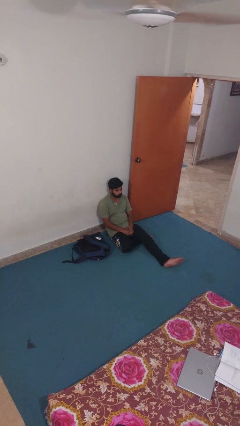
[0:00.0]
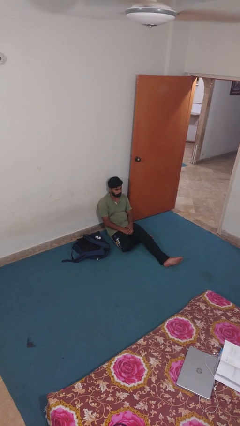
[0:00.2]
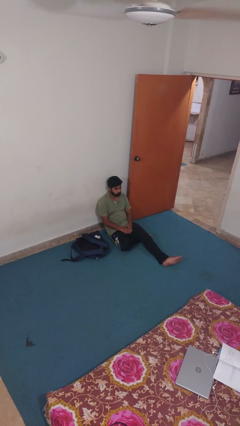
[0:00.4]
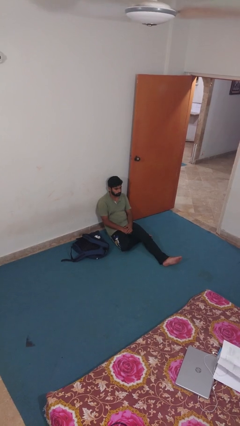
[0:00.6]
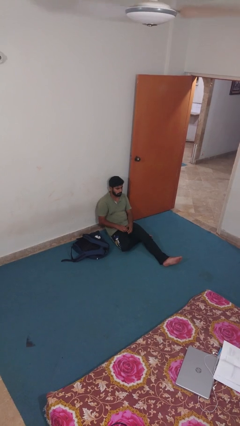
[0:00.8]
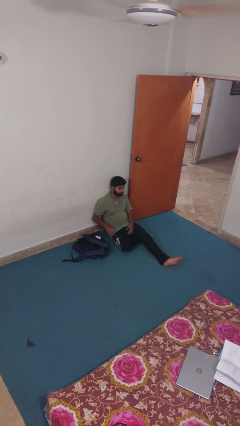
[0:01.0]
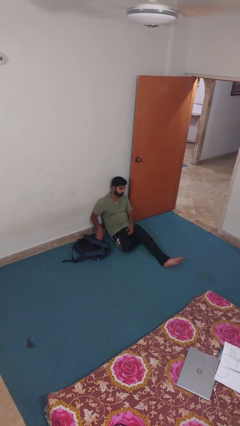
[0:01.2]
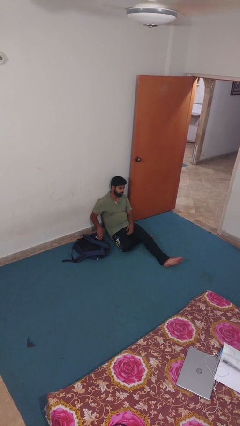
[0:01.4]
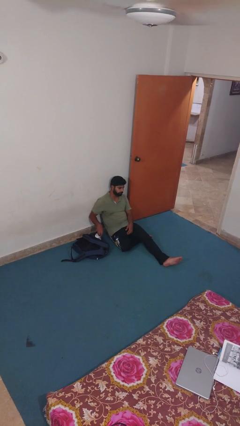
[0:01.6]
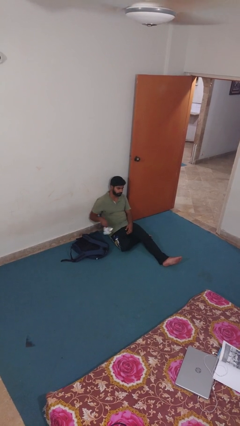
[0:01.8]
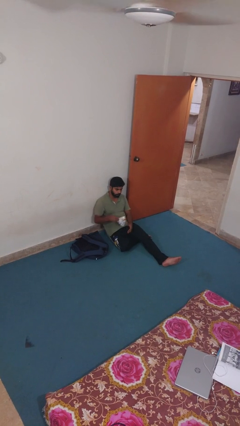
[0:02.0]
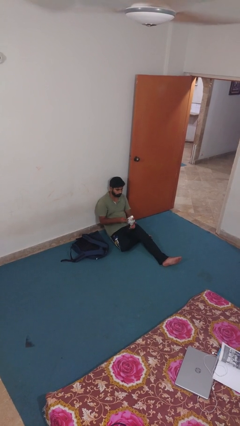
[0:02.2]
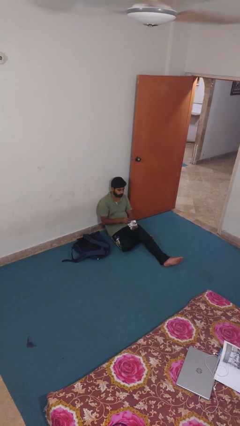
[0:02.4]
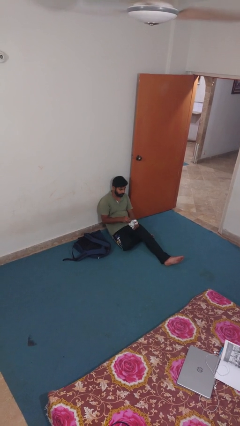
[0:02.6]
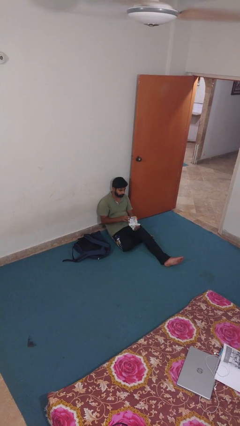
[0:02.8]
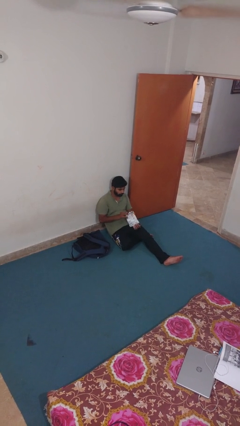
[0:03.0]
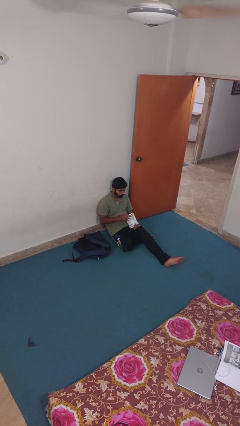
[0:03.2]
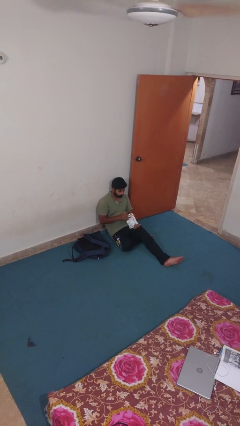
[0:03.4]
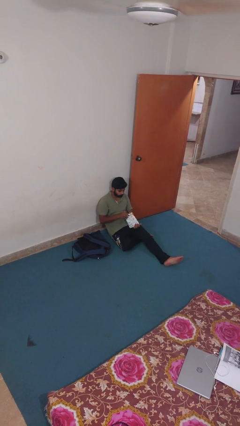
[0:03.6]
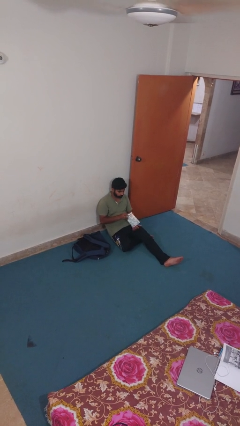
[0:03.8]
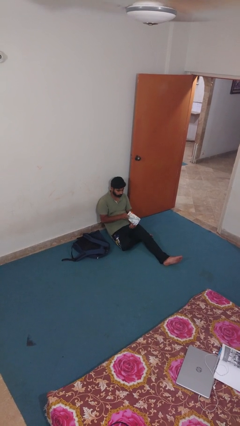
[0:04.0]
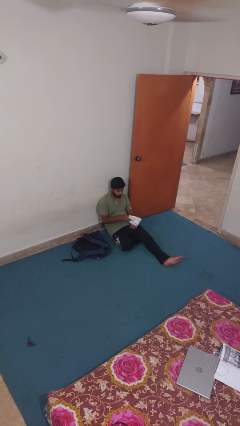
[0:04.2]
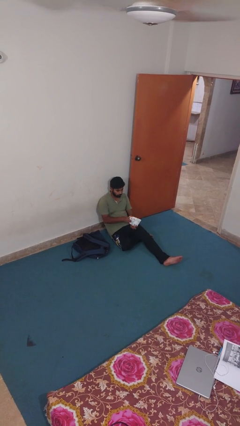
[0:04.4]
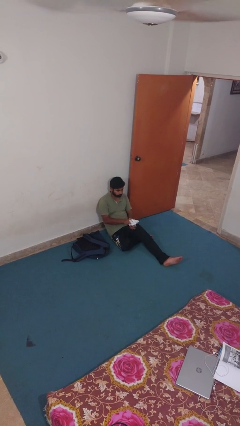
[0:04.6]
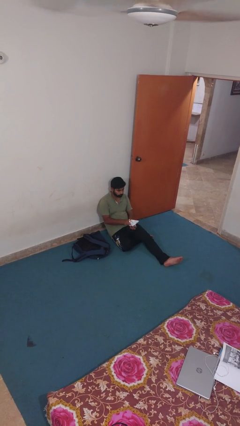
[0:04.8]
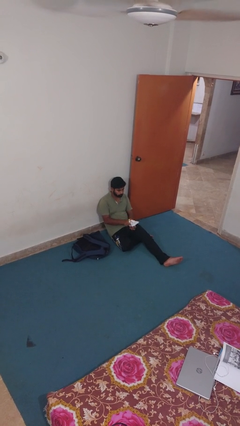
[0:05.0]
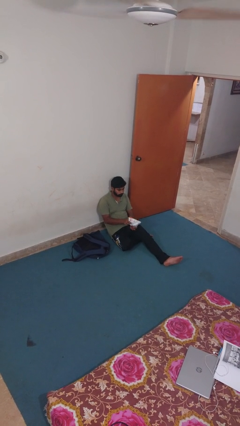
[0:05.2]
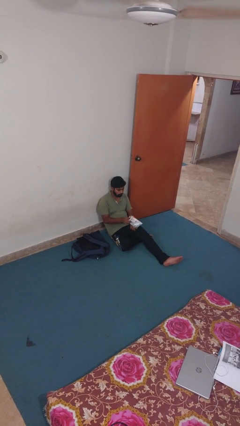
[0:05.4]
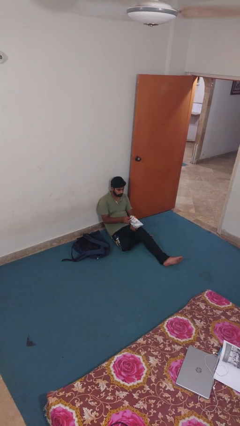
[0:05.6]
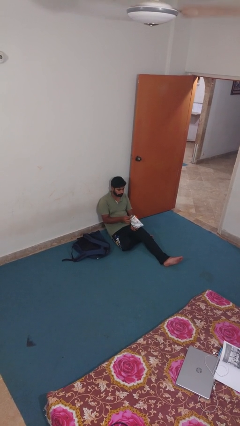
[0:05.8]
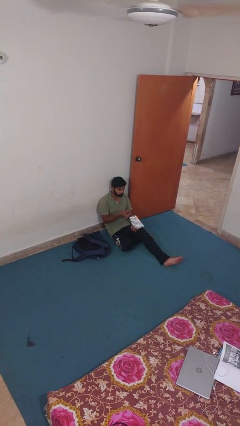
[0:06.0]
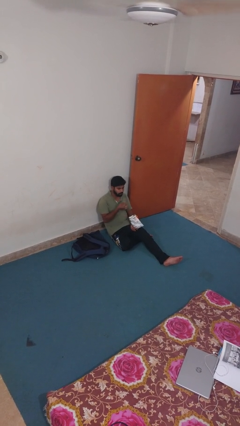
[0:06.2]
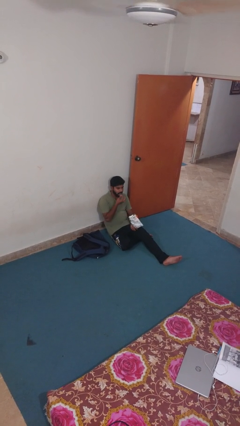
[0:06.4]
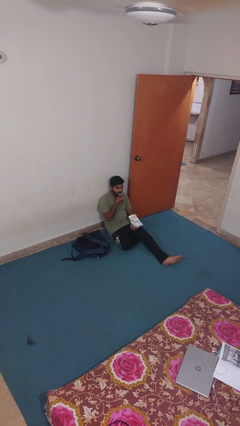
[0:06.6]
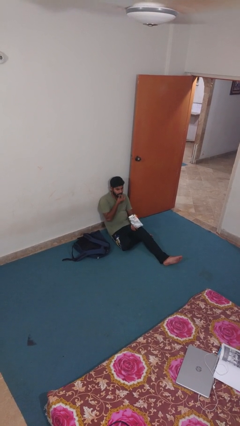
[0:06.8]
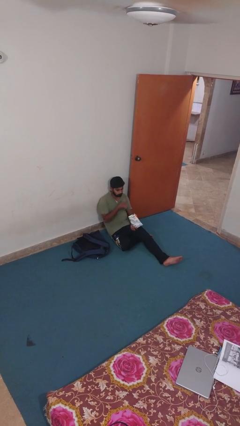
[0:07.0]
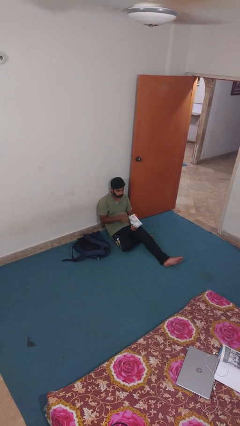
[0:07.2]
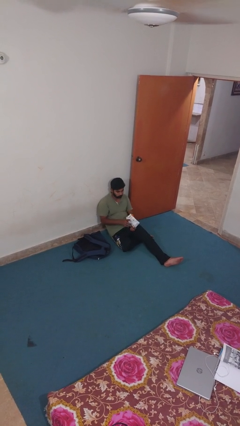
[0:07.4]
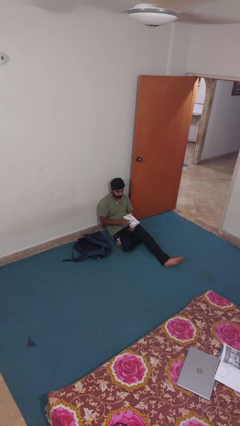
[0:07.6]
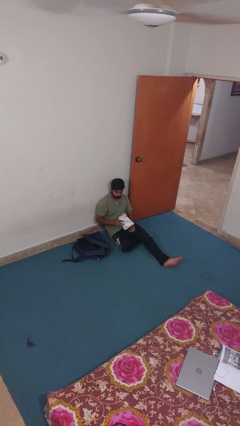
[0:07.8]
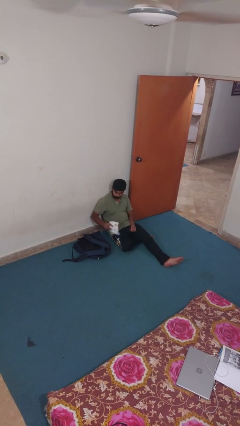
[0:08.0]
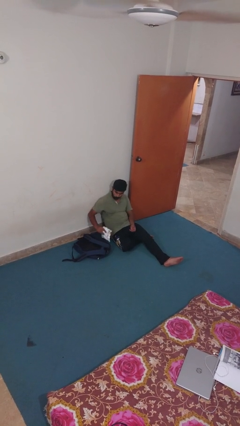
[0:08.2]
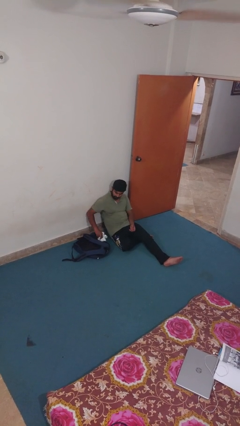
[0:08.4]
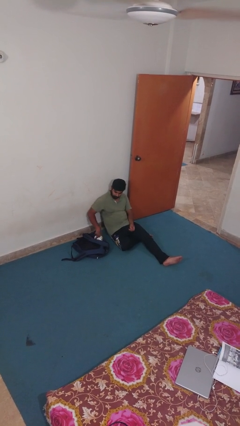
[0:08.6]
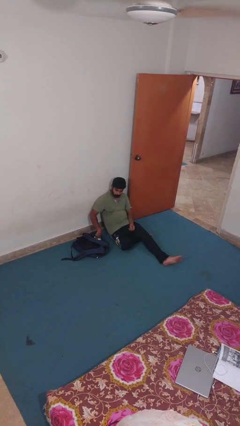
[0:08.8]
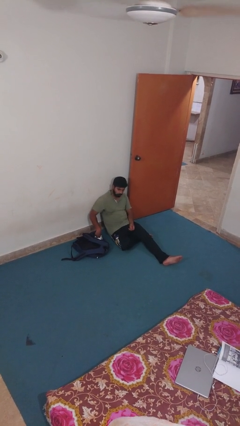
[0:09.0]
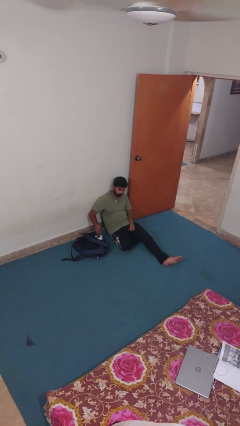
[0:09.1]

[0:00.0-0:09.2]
person eats snack from bag

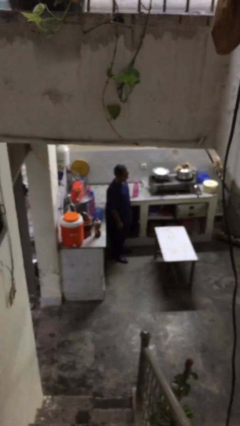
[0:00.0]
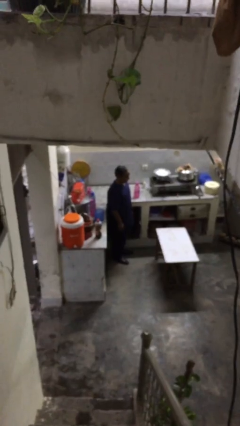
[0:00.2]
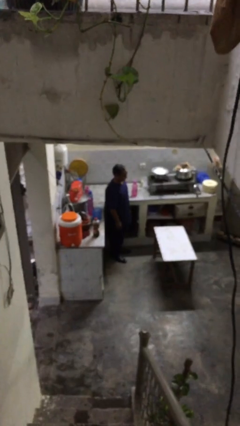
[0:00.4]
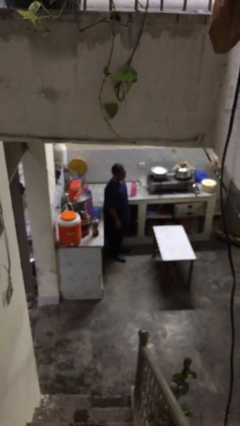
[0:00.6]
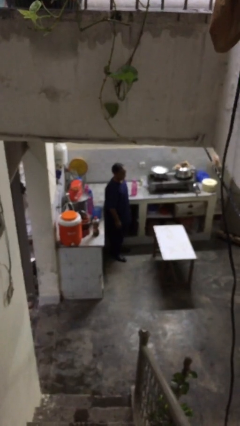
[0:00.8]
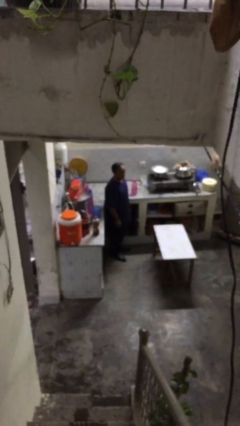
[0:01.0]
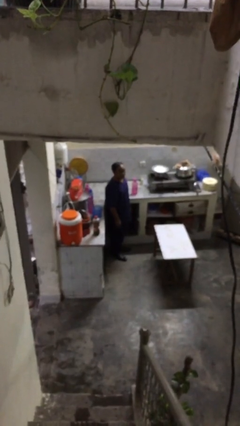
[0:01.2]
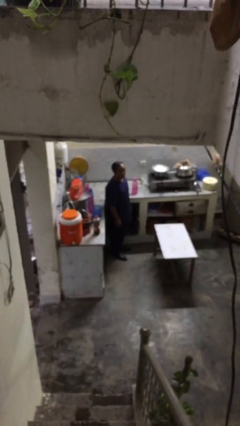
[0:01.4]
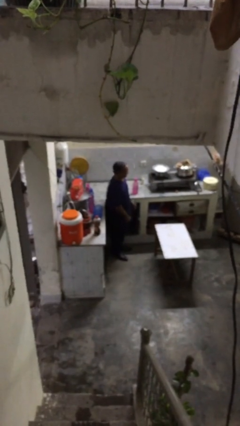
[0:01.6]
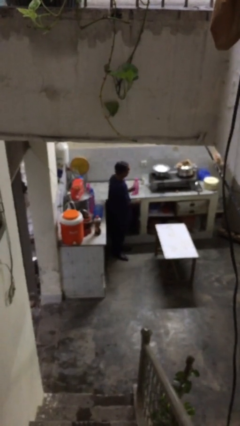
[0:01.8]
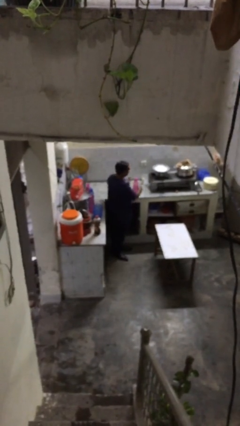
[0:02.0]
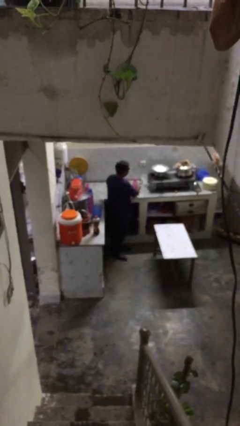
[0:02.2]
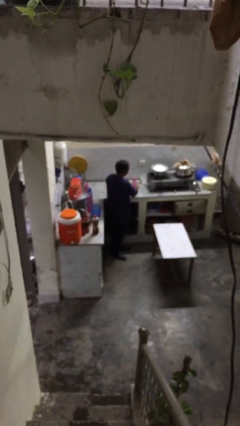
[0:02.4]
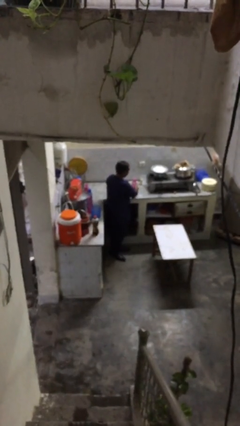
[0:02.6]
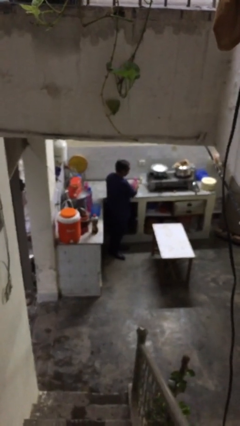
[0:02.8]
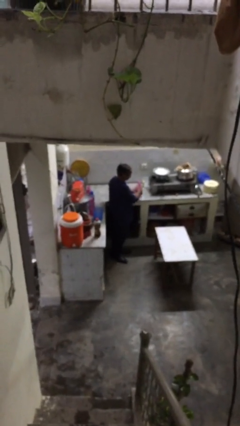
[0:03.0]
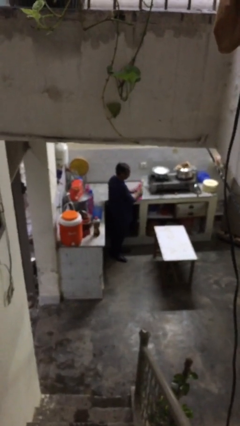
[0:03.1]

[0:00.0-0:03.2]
person picks up object from shelf

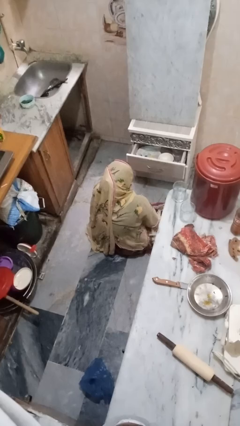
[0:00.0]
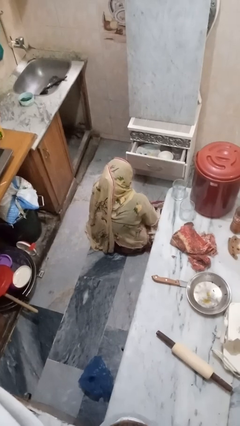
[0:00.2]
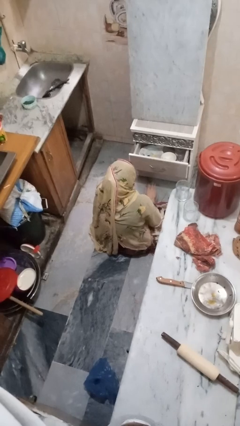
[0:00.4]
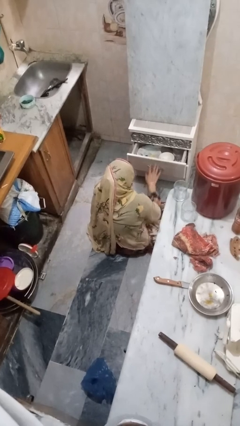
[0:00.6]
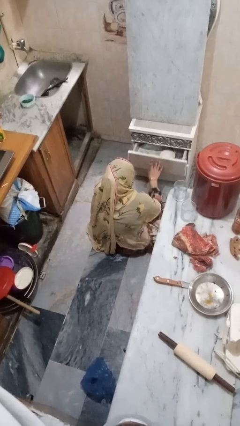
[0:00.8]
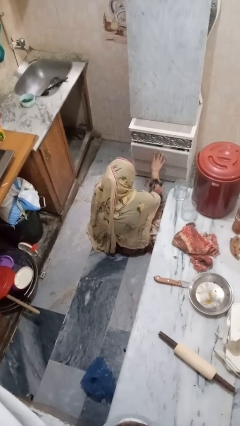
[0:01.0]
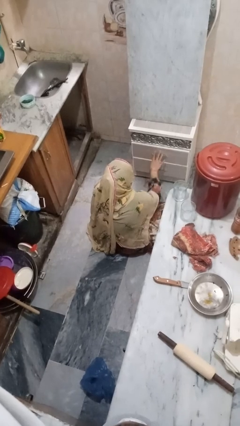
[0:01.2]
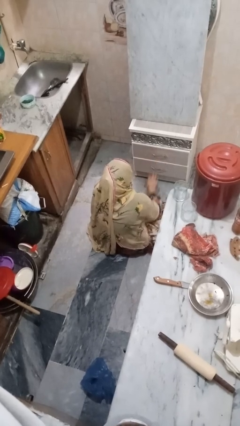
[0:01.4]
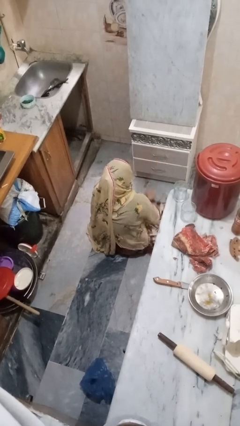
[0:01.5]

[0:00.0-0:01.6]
person closes kitchen drawer

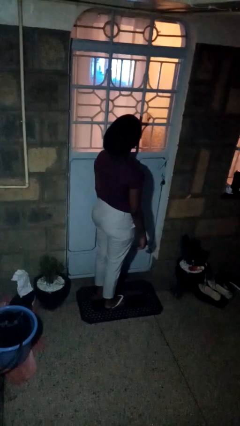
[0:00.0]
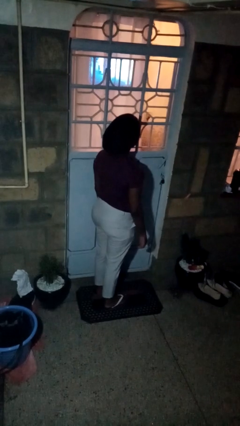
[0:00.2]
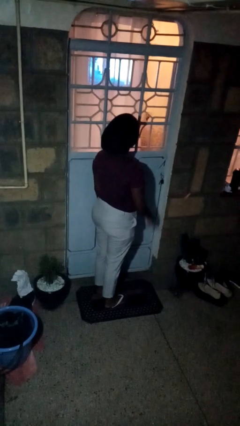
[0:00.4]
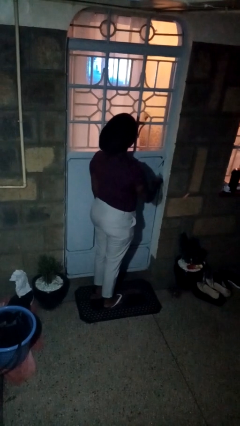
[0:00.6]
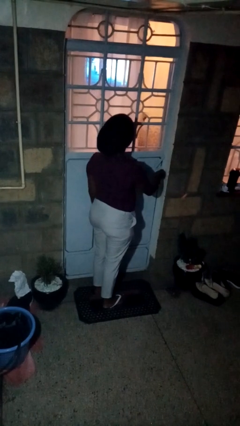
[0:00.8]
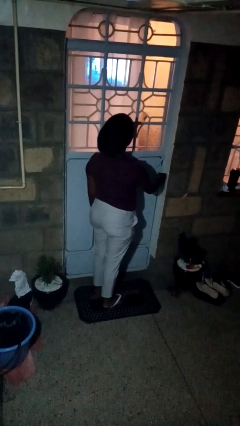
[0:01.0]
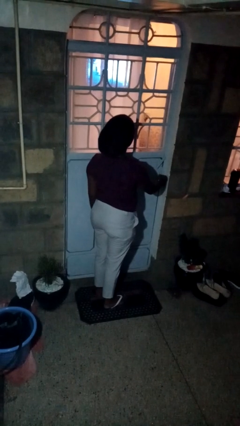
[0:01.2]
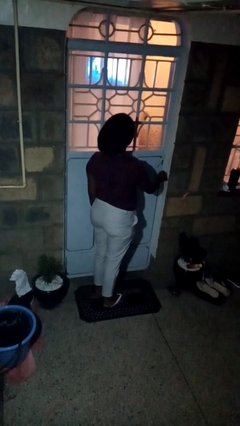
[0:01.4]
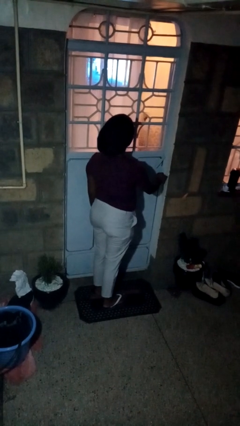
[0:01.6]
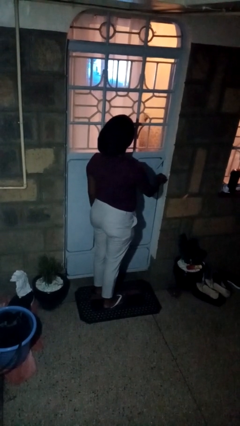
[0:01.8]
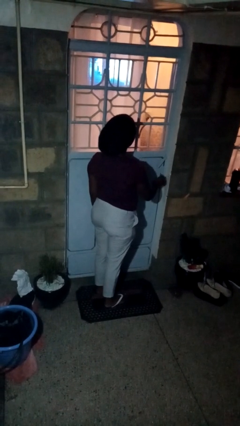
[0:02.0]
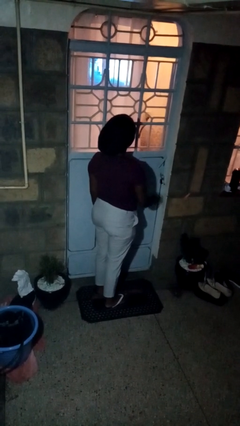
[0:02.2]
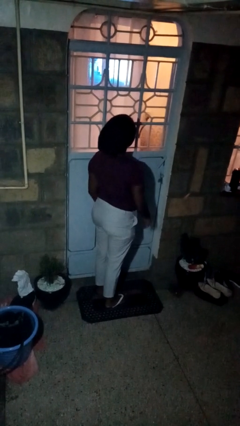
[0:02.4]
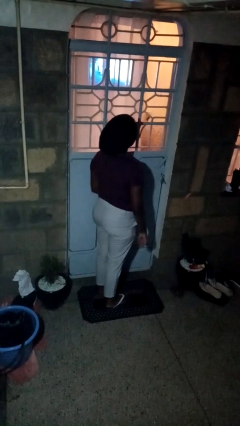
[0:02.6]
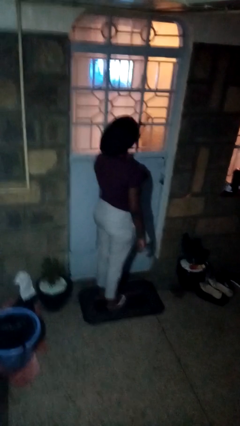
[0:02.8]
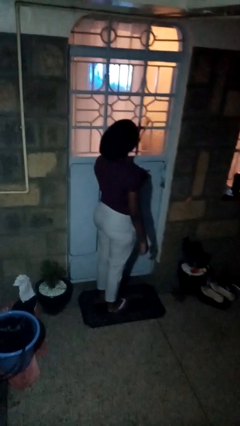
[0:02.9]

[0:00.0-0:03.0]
person unlocks door with keys

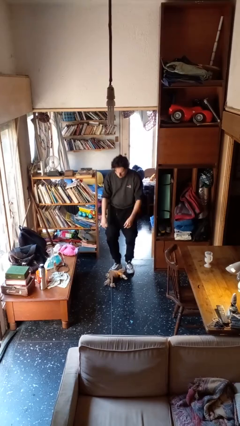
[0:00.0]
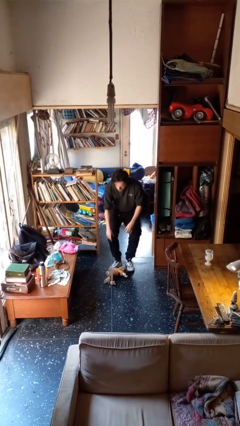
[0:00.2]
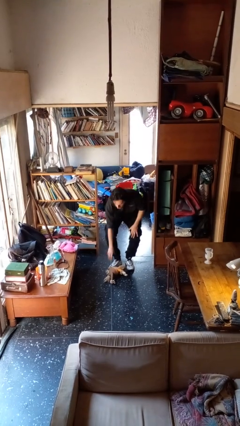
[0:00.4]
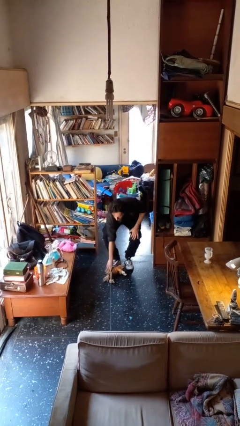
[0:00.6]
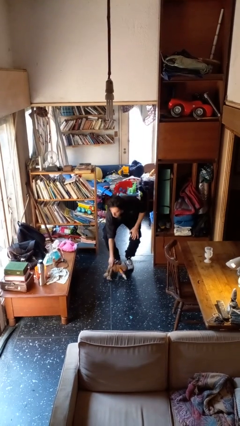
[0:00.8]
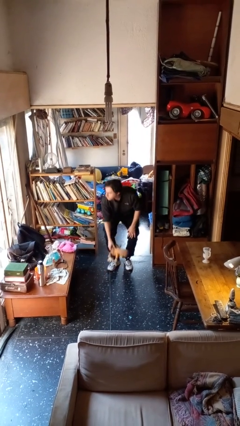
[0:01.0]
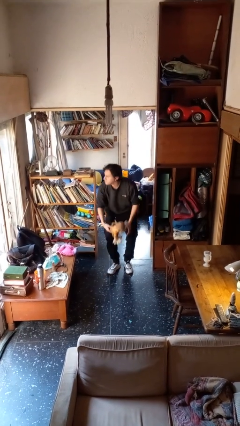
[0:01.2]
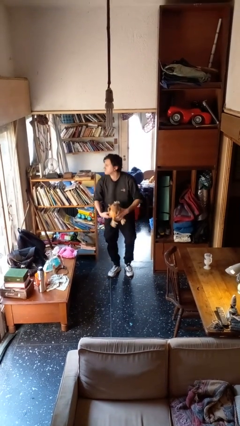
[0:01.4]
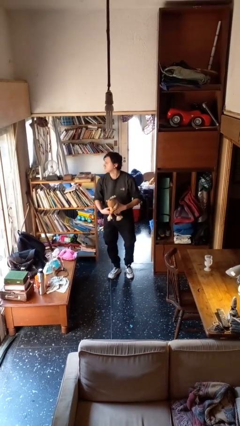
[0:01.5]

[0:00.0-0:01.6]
person picks up object from floor
